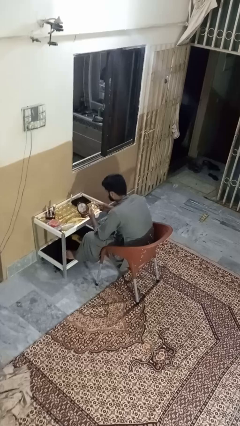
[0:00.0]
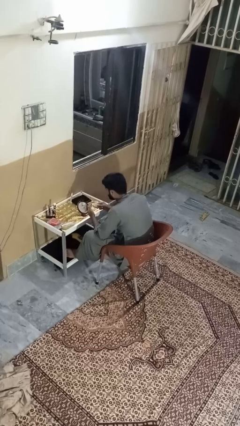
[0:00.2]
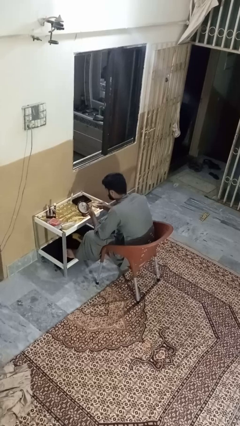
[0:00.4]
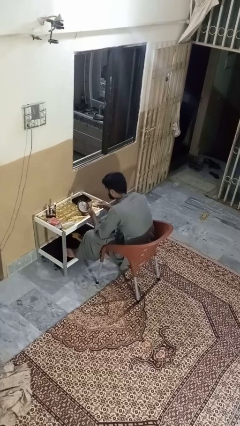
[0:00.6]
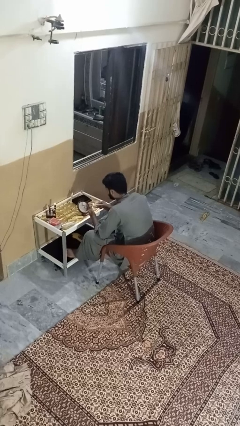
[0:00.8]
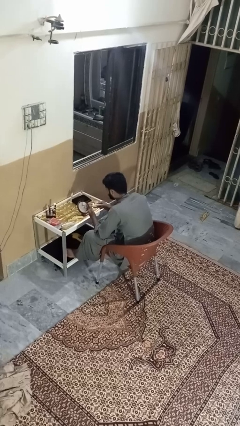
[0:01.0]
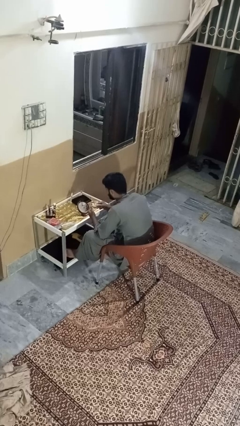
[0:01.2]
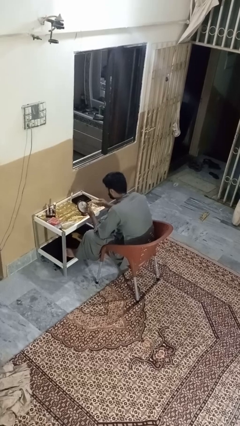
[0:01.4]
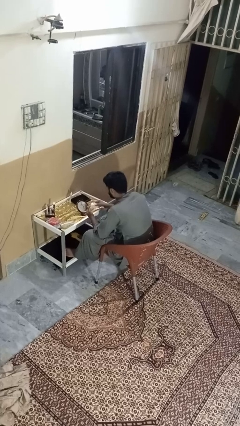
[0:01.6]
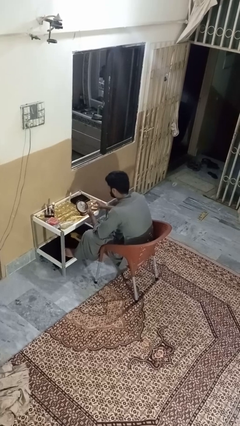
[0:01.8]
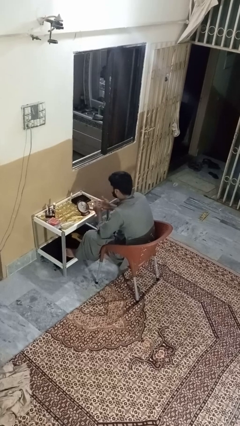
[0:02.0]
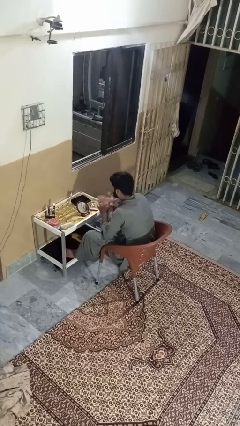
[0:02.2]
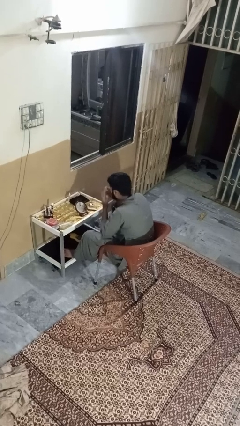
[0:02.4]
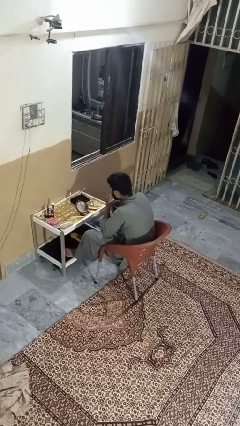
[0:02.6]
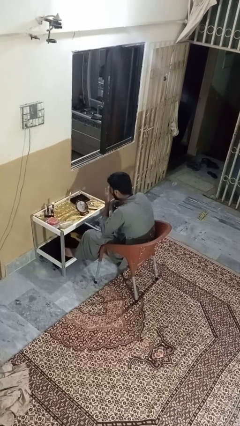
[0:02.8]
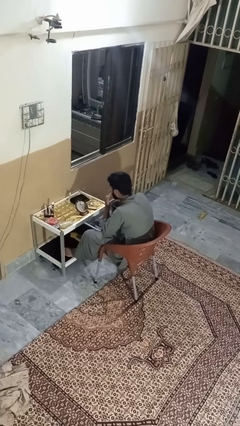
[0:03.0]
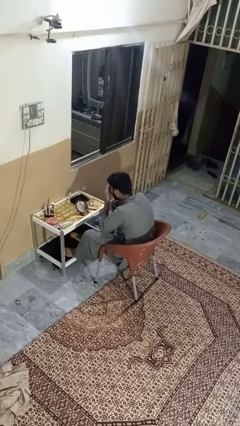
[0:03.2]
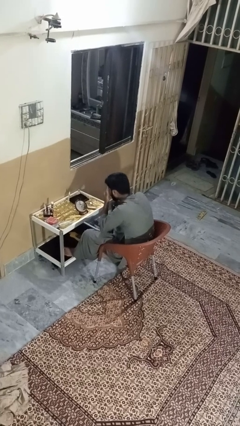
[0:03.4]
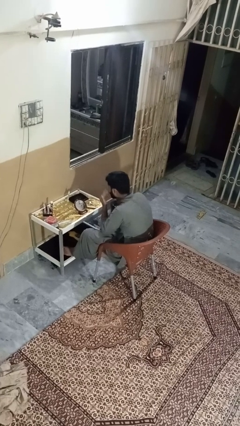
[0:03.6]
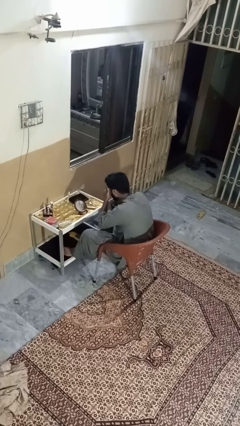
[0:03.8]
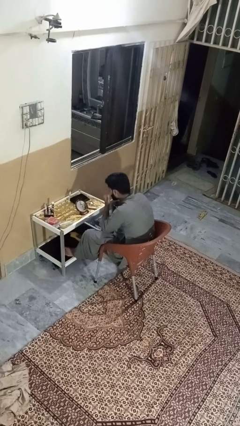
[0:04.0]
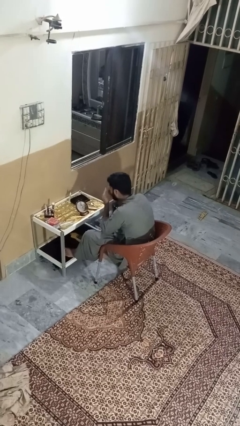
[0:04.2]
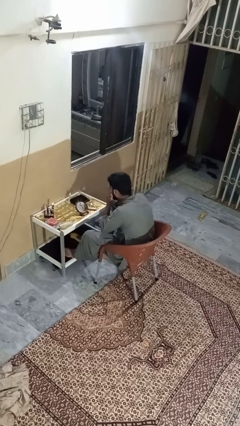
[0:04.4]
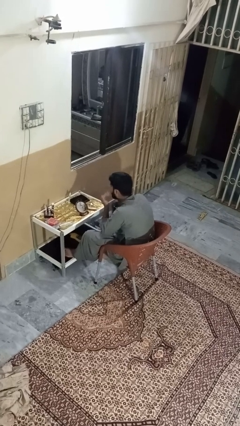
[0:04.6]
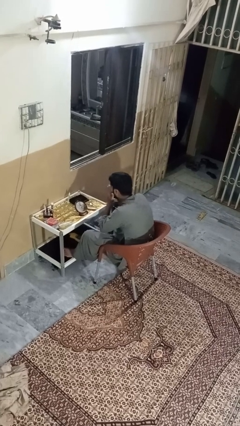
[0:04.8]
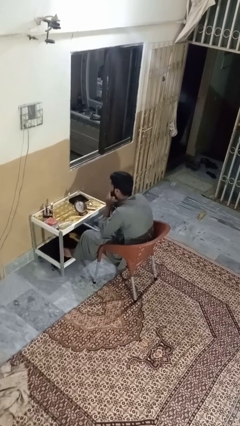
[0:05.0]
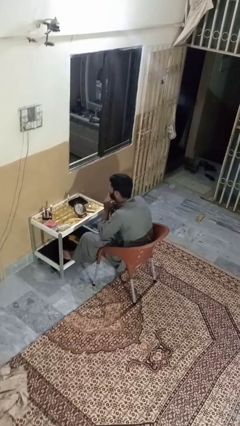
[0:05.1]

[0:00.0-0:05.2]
person applies foundation makeup

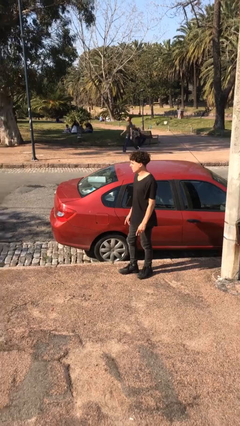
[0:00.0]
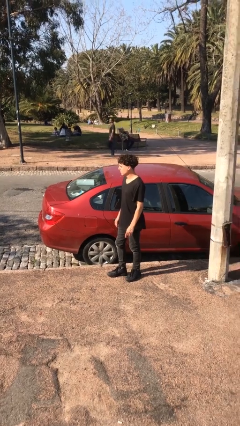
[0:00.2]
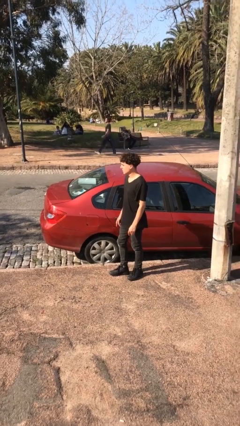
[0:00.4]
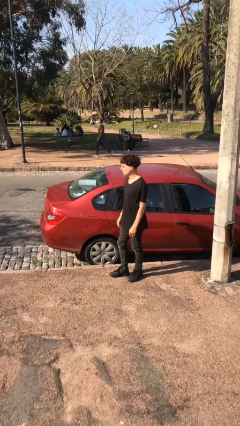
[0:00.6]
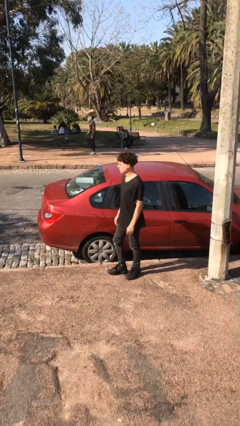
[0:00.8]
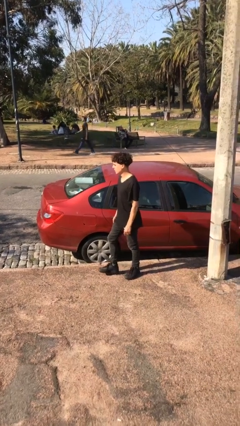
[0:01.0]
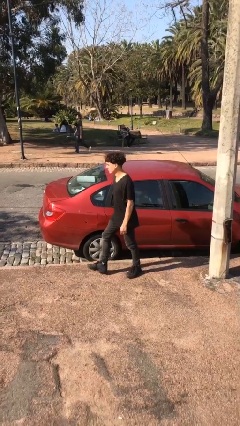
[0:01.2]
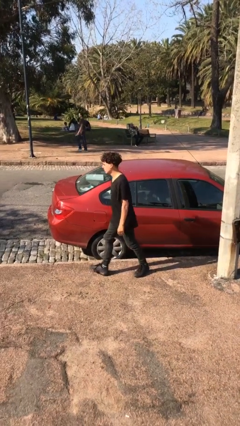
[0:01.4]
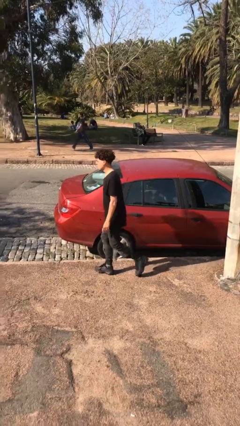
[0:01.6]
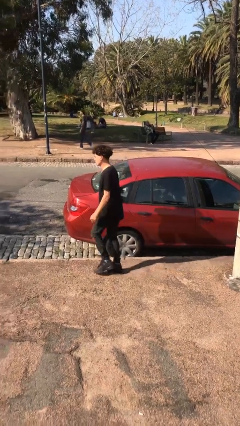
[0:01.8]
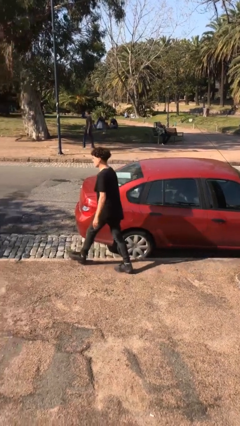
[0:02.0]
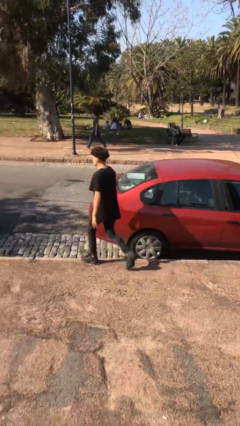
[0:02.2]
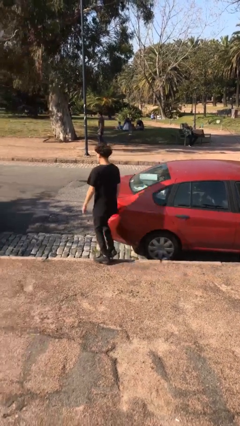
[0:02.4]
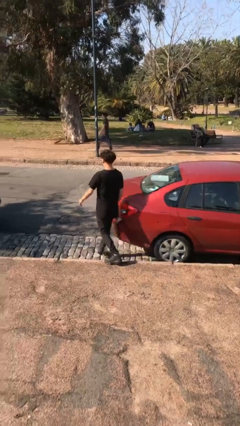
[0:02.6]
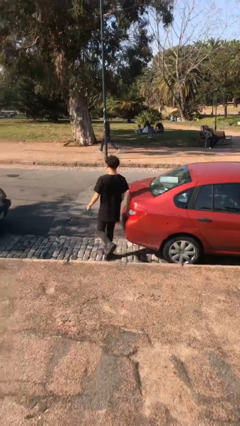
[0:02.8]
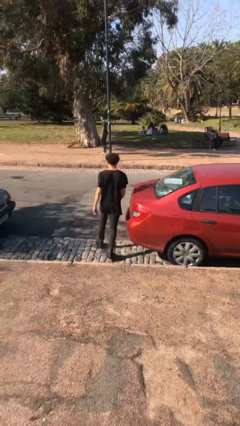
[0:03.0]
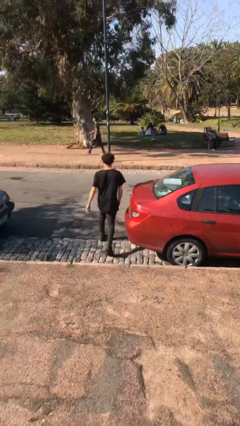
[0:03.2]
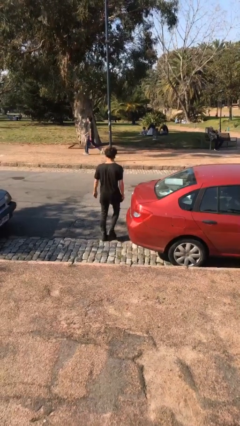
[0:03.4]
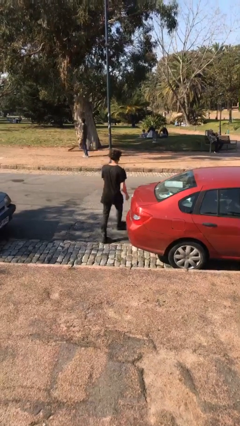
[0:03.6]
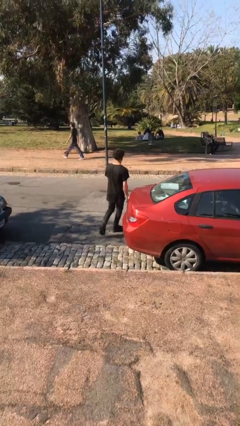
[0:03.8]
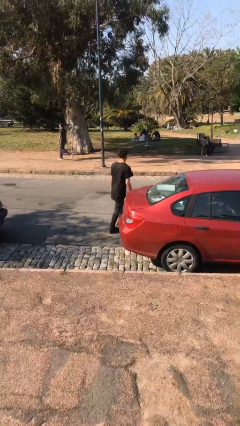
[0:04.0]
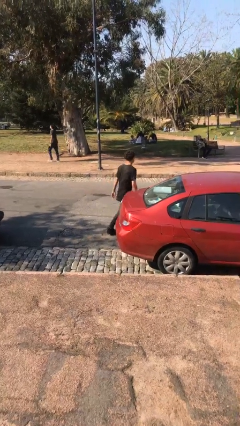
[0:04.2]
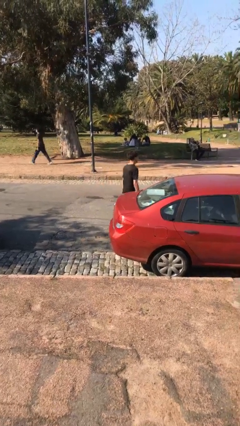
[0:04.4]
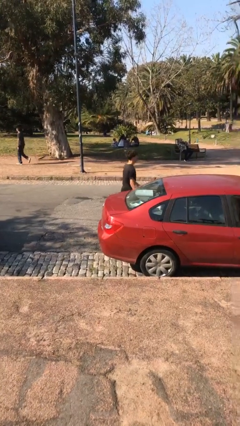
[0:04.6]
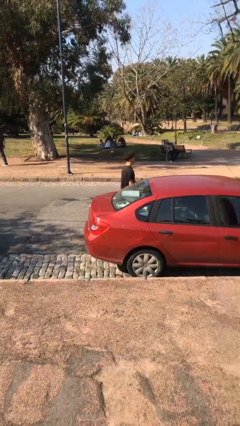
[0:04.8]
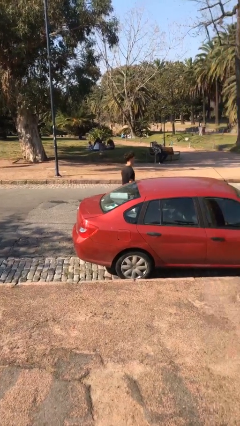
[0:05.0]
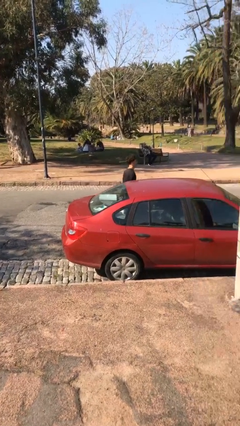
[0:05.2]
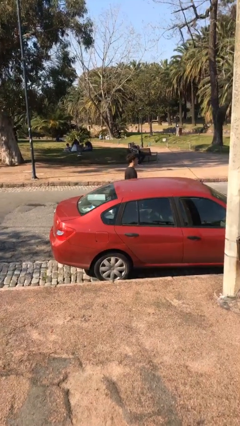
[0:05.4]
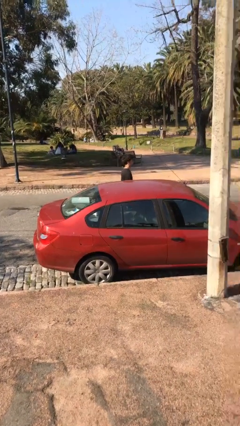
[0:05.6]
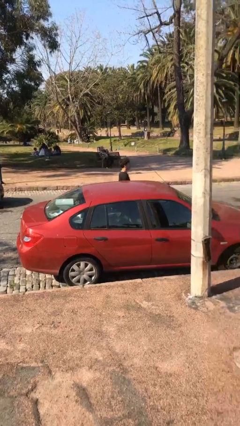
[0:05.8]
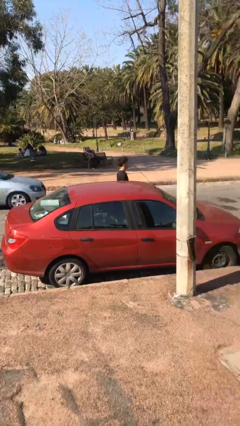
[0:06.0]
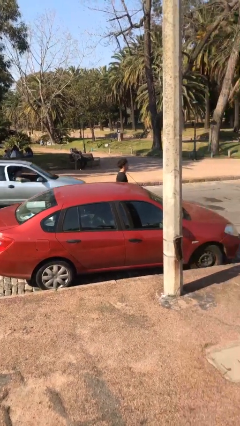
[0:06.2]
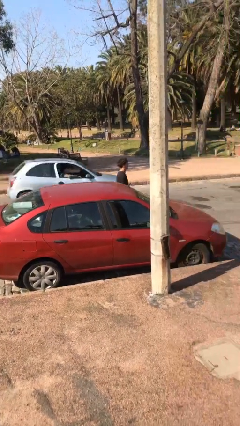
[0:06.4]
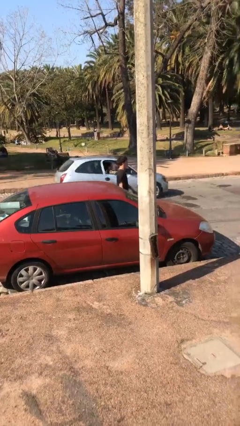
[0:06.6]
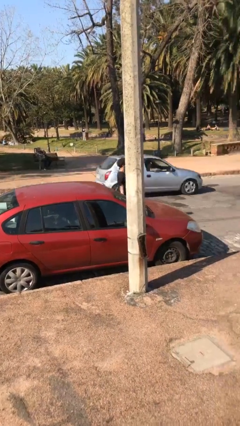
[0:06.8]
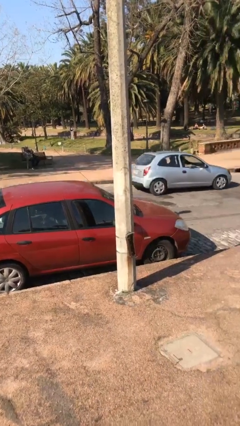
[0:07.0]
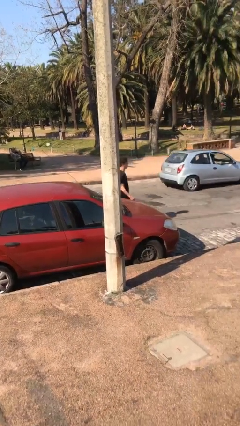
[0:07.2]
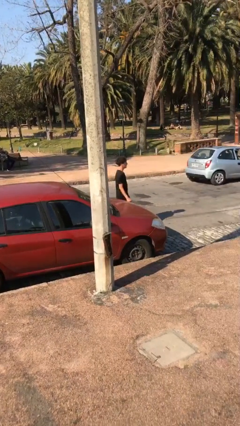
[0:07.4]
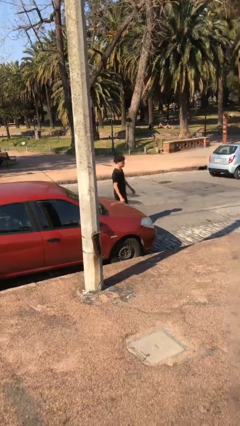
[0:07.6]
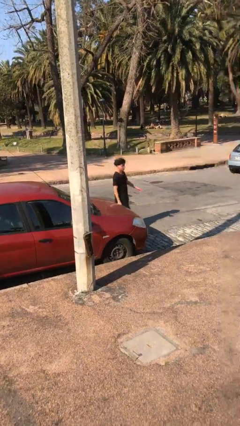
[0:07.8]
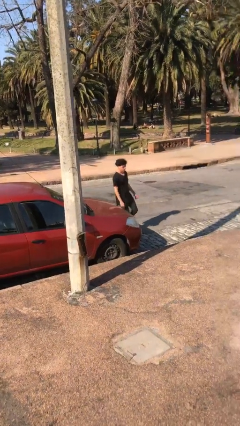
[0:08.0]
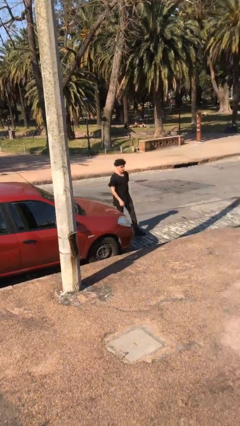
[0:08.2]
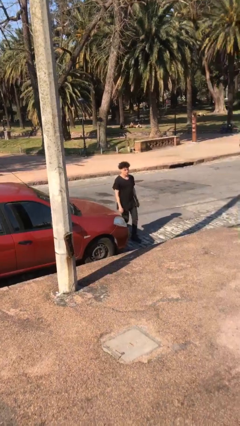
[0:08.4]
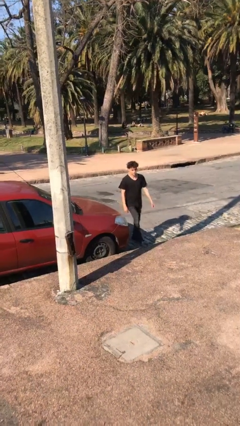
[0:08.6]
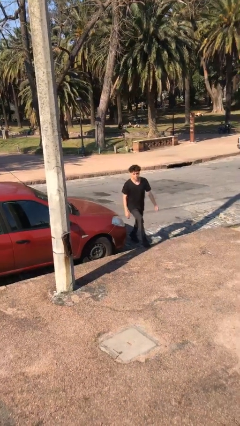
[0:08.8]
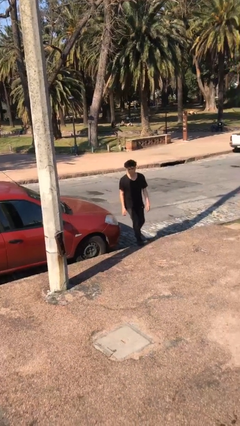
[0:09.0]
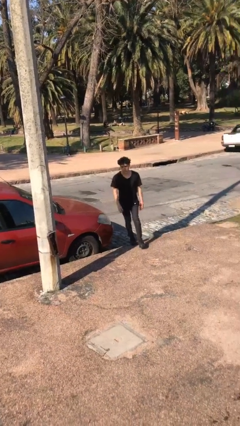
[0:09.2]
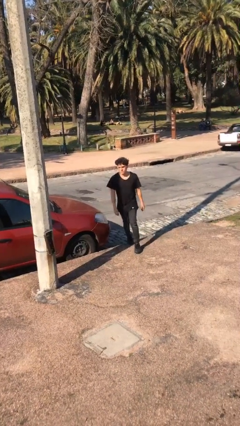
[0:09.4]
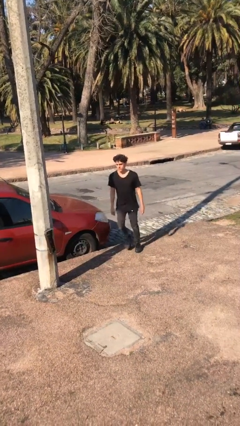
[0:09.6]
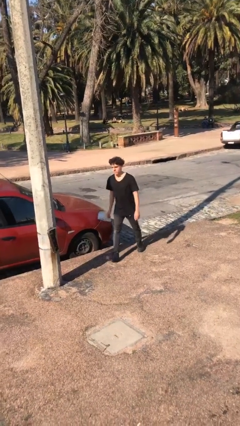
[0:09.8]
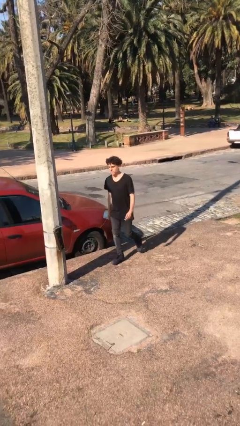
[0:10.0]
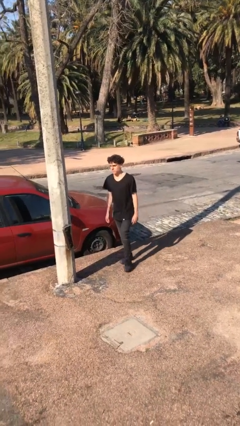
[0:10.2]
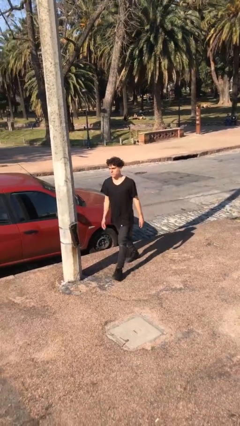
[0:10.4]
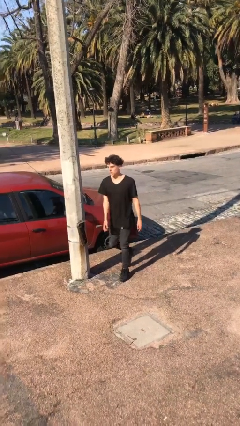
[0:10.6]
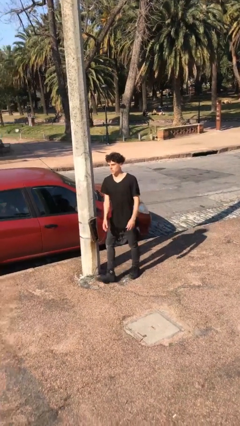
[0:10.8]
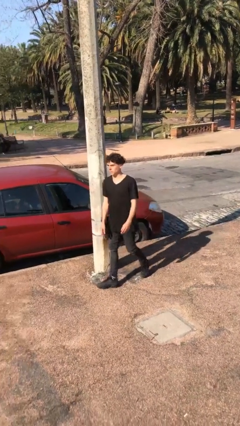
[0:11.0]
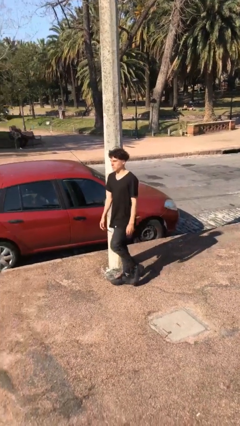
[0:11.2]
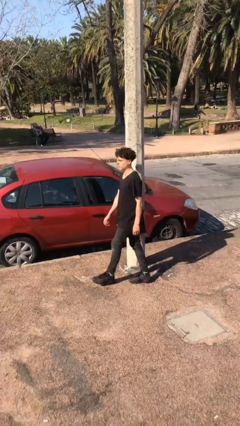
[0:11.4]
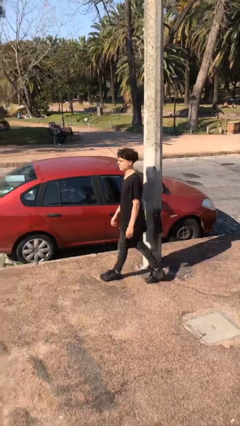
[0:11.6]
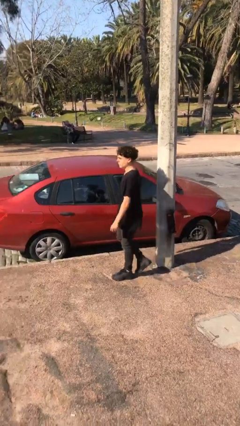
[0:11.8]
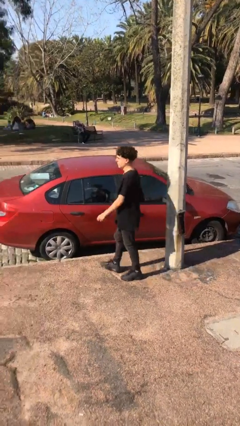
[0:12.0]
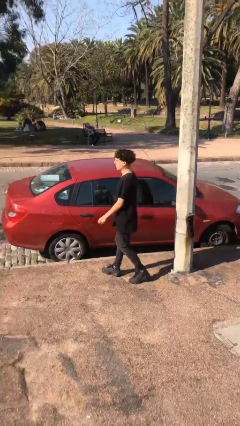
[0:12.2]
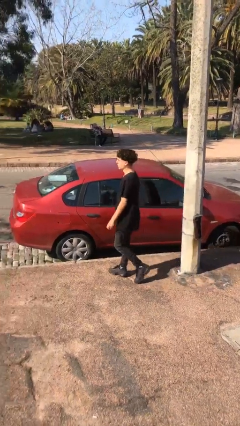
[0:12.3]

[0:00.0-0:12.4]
person walks around car

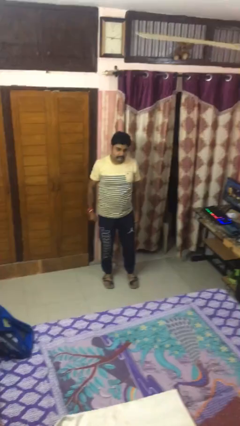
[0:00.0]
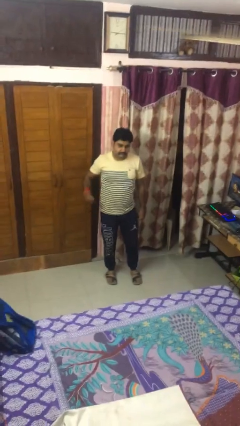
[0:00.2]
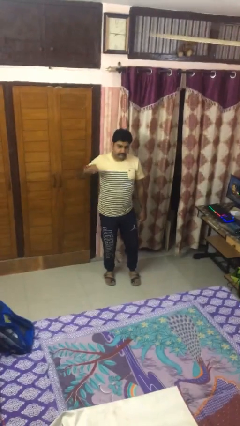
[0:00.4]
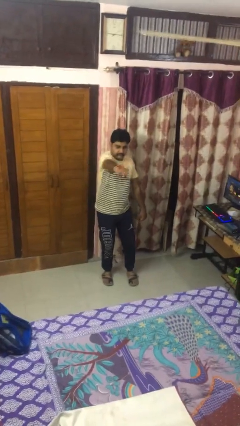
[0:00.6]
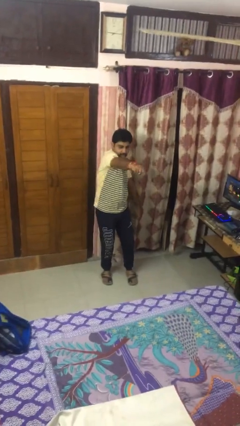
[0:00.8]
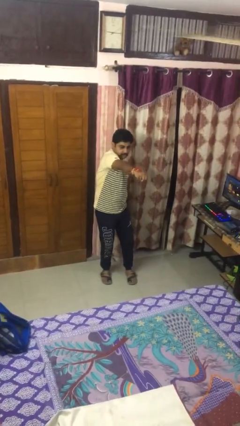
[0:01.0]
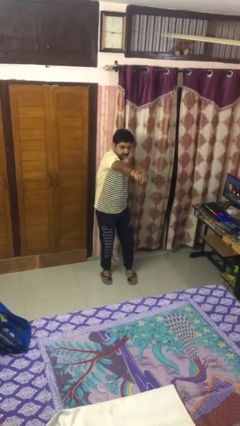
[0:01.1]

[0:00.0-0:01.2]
person punches
